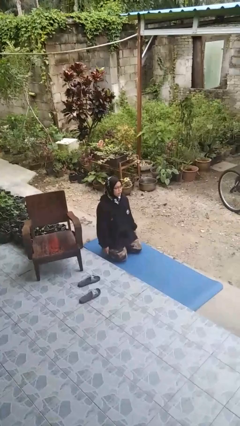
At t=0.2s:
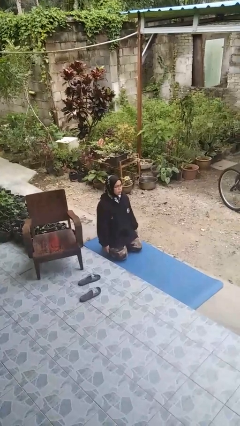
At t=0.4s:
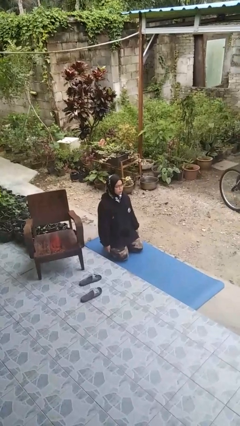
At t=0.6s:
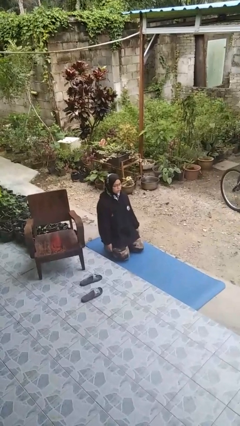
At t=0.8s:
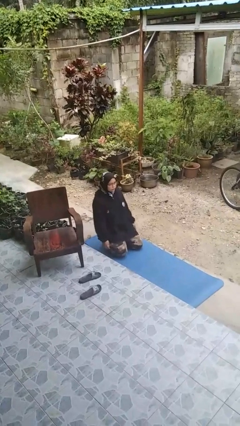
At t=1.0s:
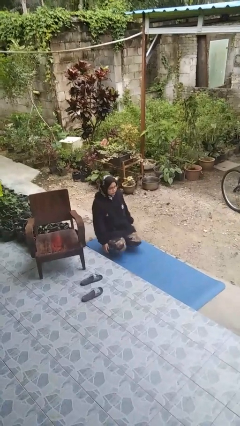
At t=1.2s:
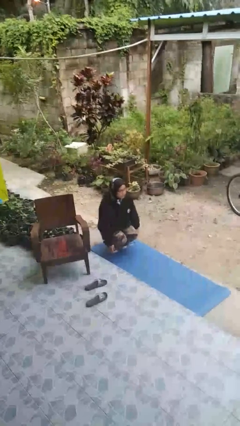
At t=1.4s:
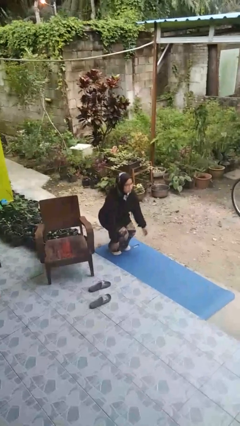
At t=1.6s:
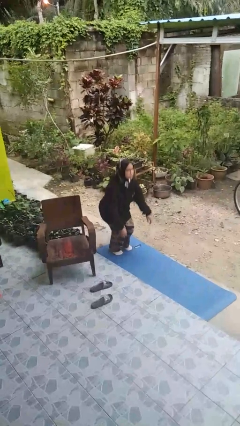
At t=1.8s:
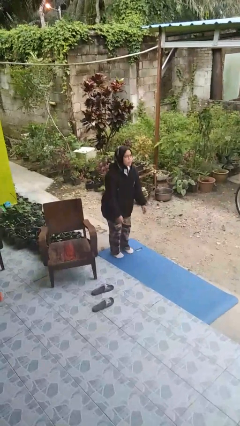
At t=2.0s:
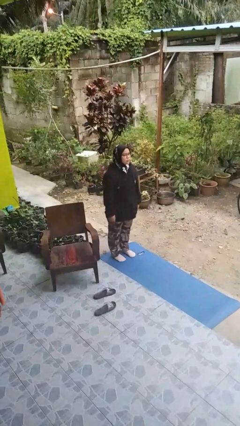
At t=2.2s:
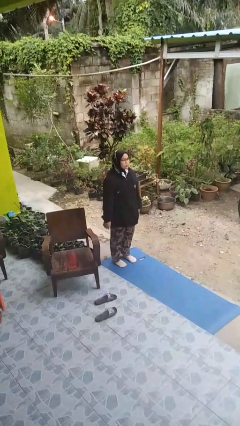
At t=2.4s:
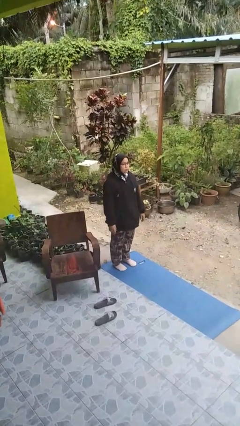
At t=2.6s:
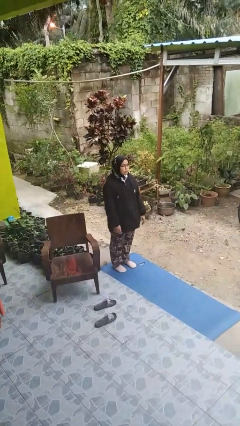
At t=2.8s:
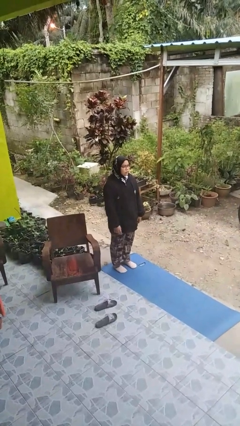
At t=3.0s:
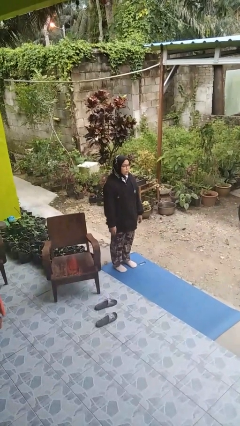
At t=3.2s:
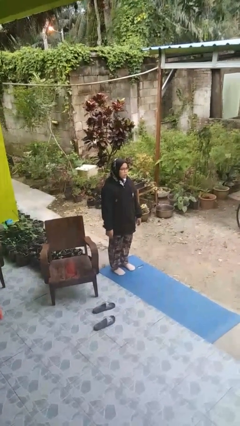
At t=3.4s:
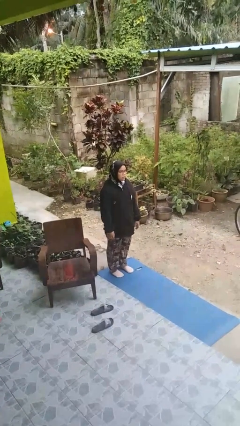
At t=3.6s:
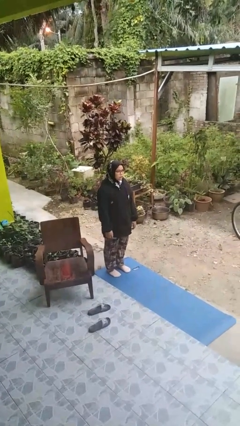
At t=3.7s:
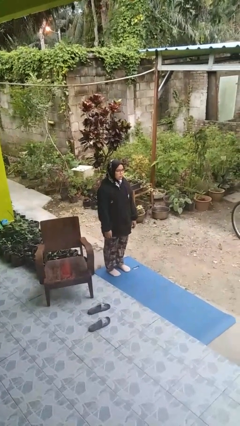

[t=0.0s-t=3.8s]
person stands up from floor

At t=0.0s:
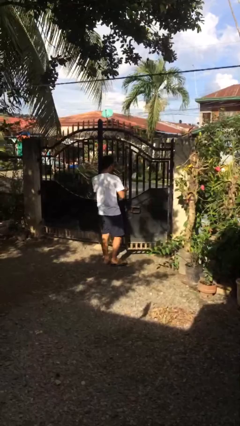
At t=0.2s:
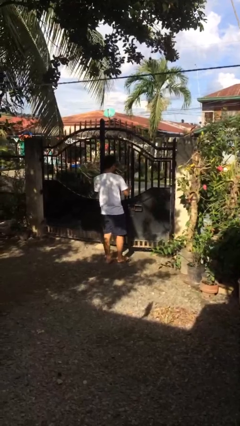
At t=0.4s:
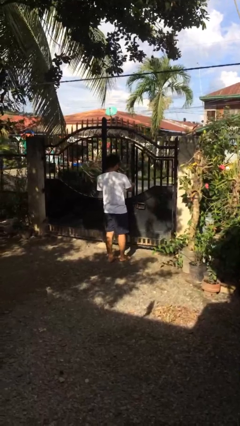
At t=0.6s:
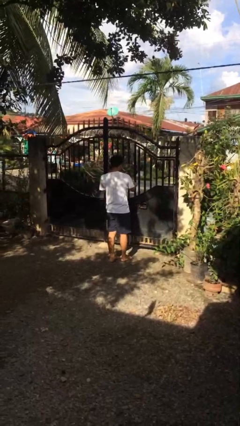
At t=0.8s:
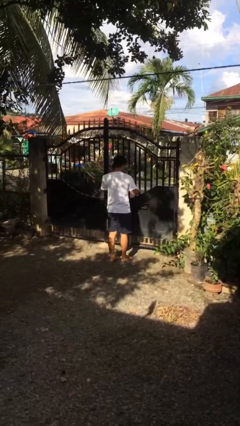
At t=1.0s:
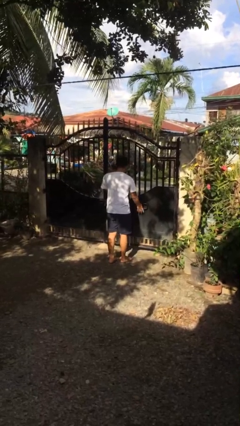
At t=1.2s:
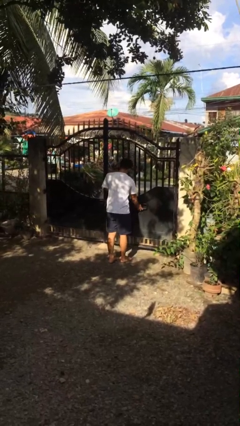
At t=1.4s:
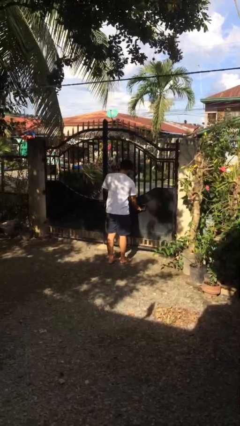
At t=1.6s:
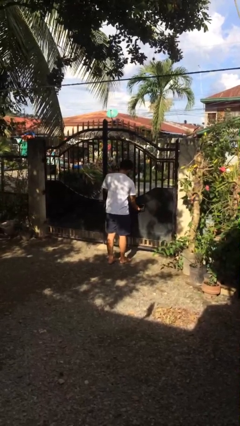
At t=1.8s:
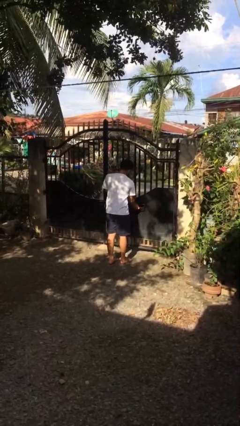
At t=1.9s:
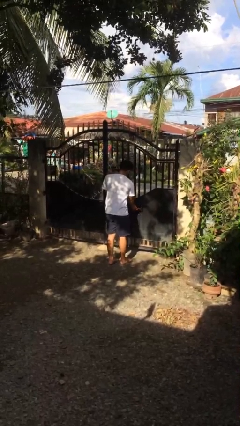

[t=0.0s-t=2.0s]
person closes facility door

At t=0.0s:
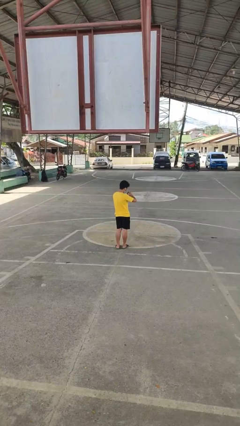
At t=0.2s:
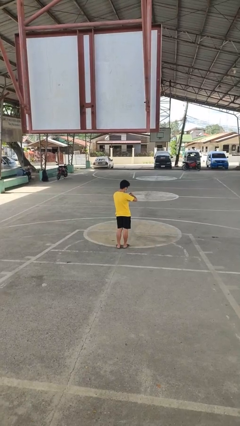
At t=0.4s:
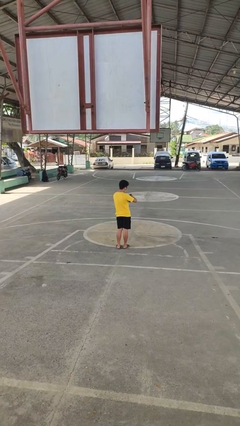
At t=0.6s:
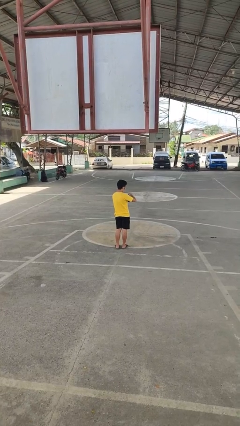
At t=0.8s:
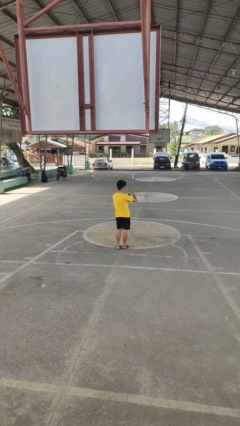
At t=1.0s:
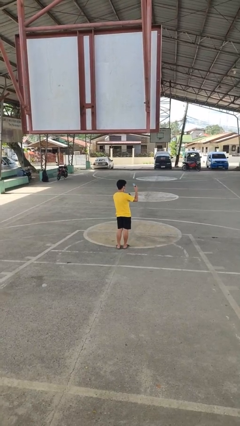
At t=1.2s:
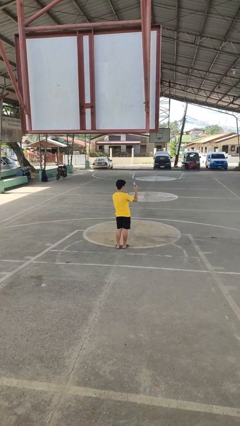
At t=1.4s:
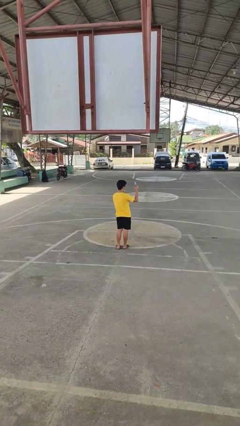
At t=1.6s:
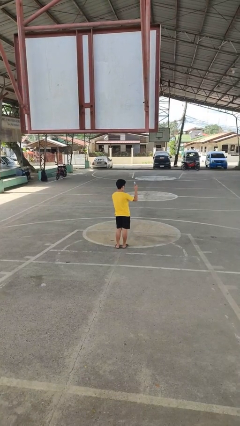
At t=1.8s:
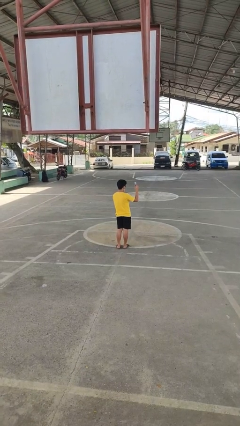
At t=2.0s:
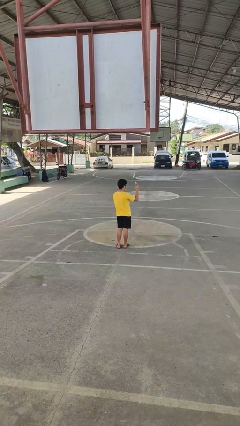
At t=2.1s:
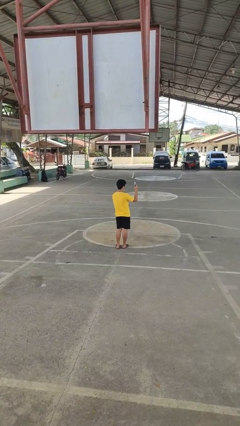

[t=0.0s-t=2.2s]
person takes object from purse

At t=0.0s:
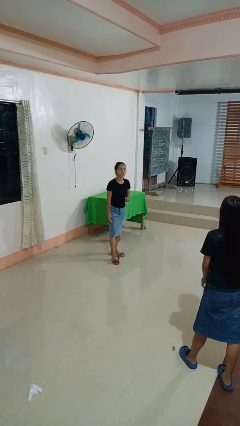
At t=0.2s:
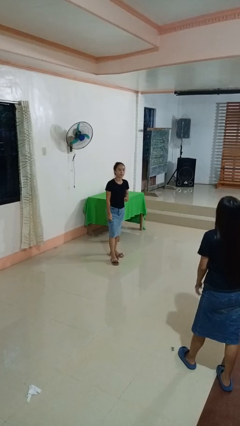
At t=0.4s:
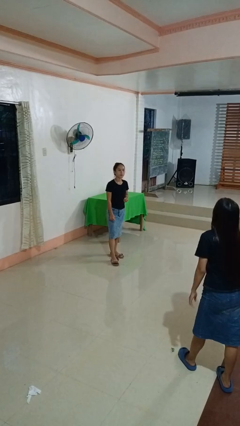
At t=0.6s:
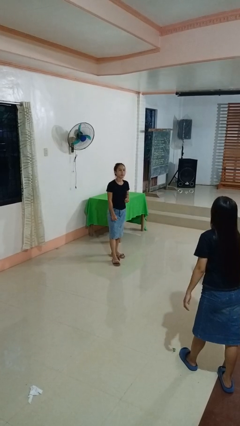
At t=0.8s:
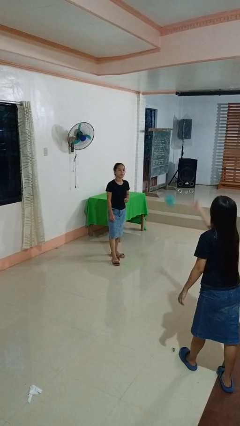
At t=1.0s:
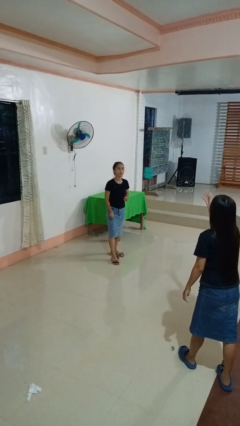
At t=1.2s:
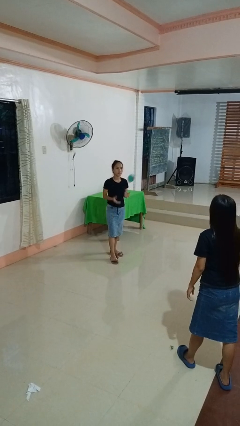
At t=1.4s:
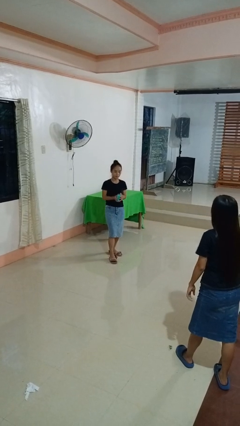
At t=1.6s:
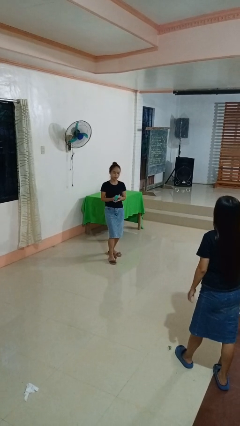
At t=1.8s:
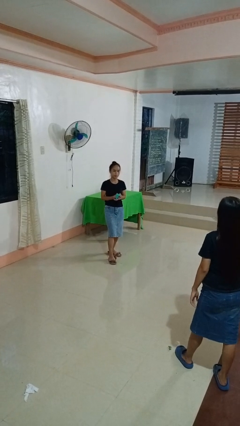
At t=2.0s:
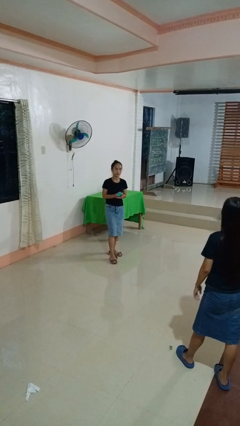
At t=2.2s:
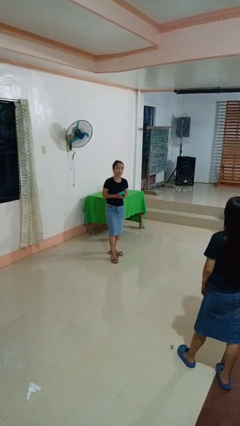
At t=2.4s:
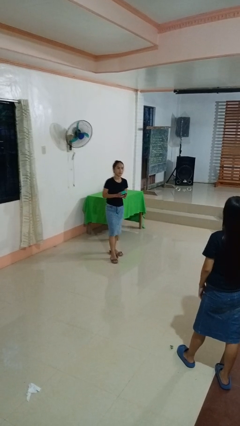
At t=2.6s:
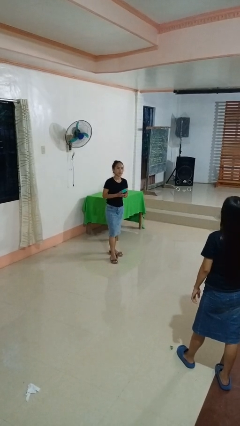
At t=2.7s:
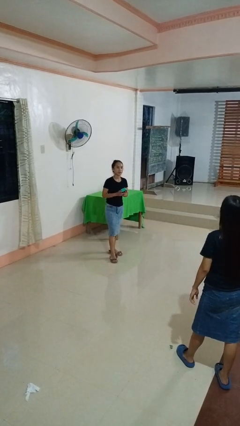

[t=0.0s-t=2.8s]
person catches object from person

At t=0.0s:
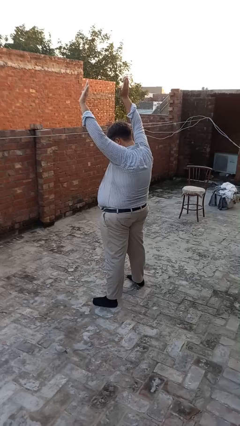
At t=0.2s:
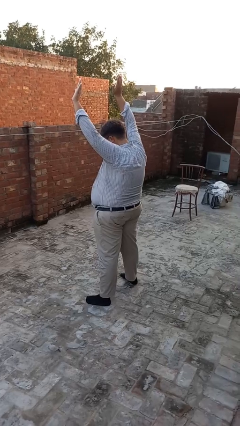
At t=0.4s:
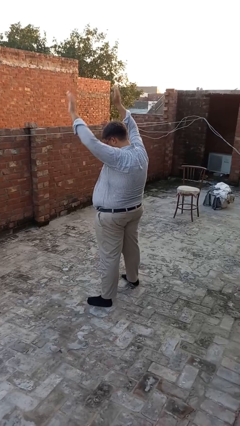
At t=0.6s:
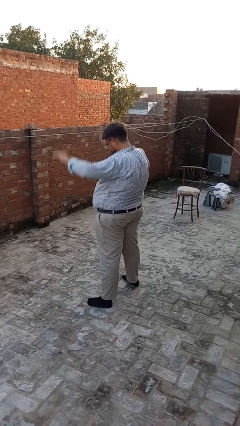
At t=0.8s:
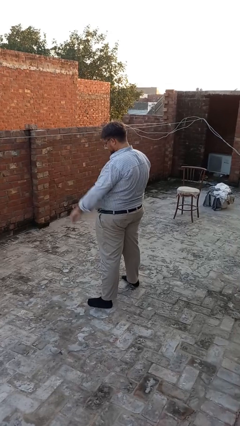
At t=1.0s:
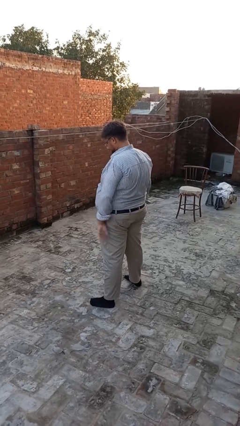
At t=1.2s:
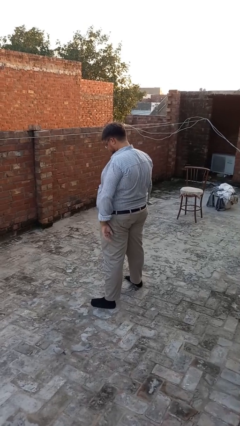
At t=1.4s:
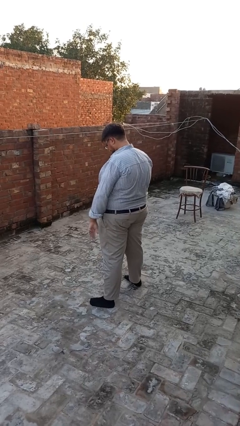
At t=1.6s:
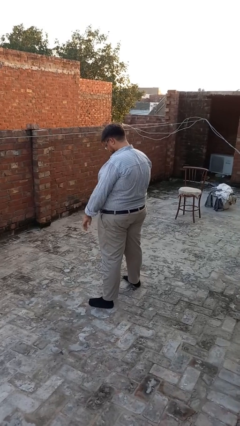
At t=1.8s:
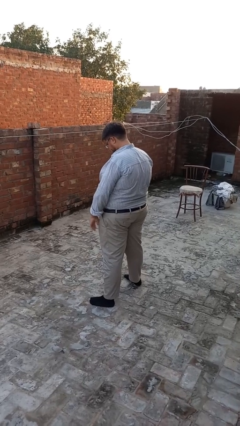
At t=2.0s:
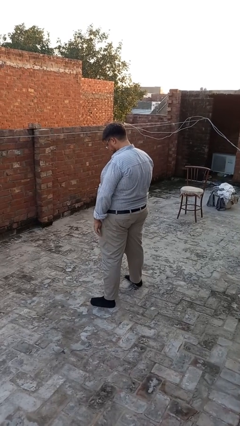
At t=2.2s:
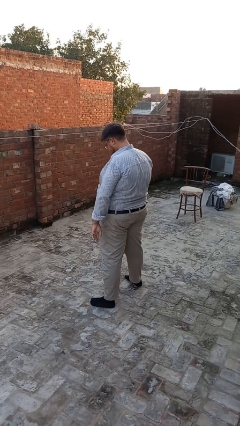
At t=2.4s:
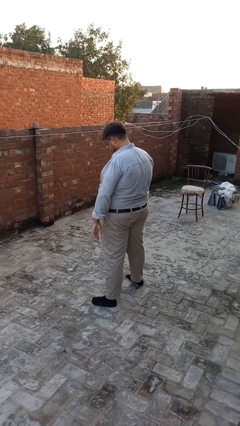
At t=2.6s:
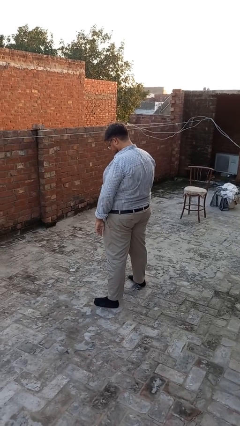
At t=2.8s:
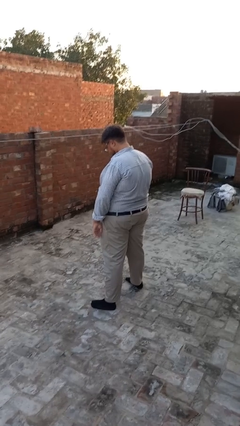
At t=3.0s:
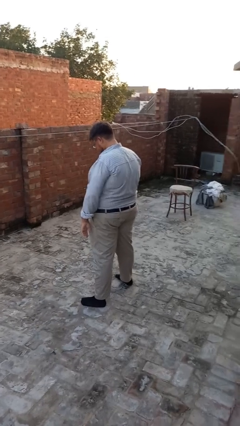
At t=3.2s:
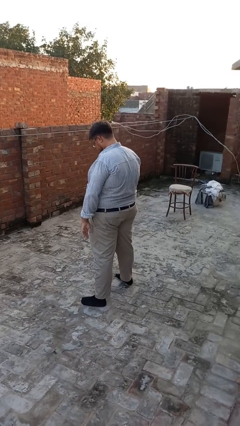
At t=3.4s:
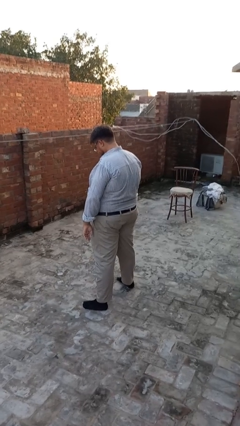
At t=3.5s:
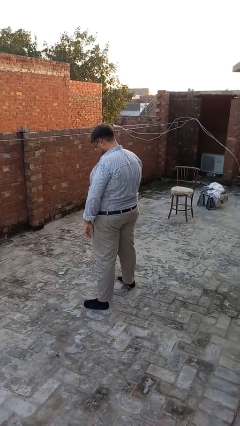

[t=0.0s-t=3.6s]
person gestures swipe down

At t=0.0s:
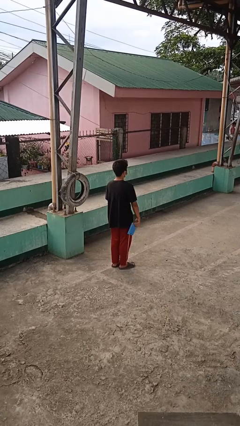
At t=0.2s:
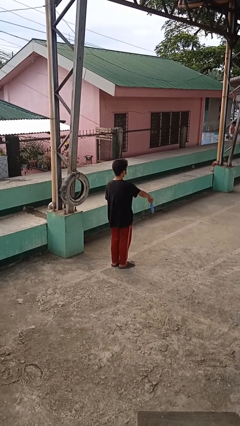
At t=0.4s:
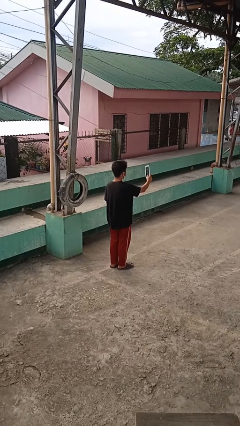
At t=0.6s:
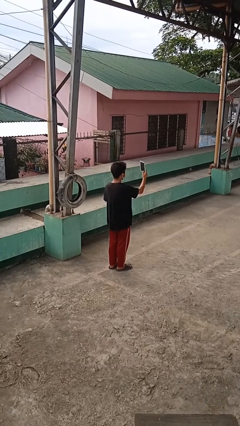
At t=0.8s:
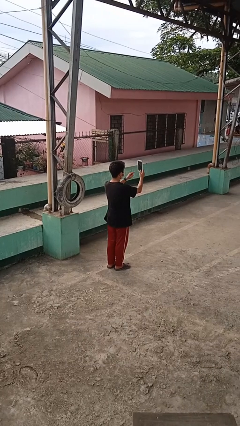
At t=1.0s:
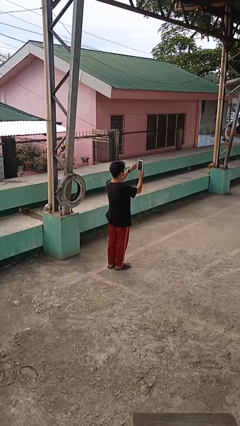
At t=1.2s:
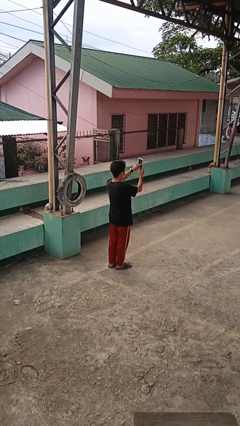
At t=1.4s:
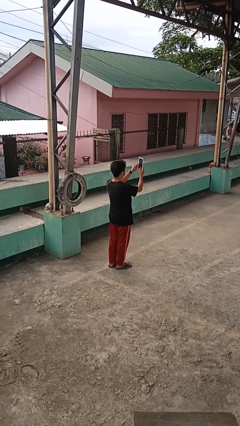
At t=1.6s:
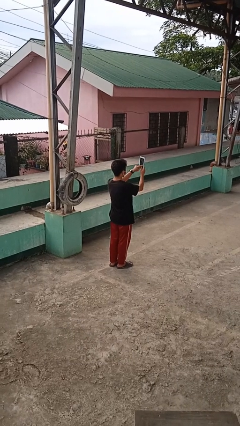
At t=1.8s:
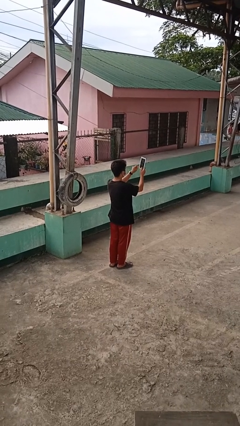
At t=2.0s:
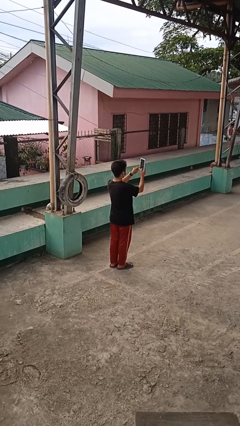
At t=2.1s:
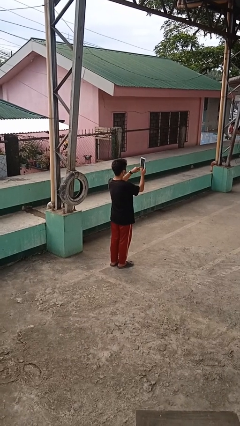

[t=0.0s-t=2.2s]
person interacts with tablet

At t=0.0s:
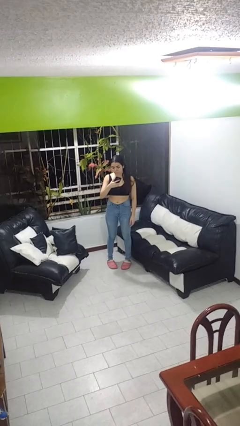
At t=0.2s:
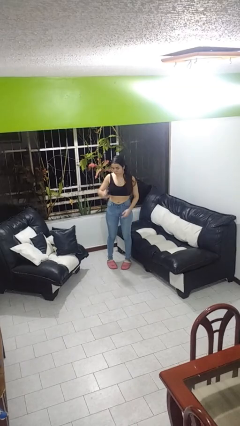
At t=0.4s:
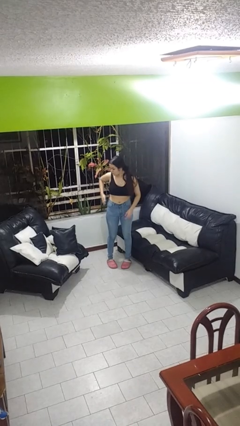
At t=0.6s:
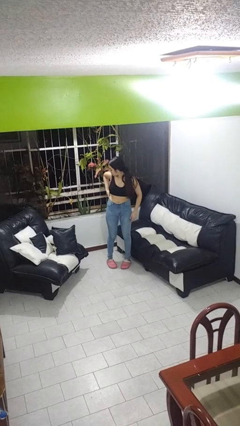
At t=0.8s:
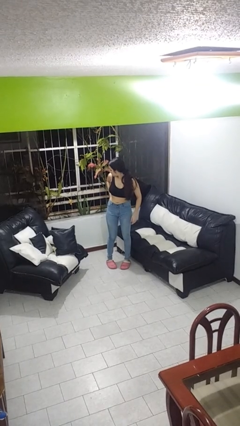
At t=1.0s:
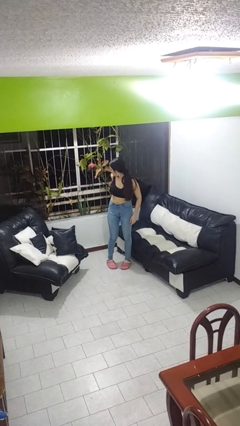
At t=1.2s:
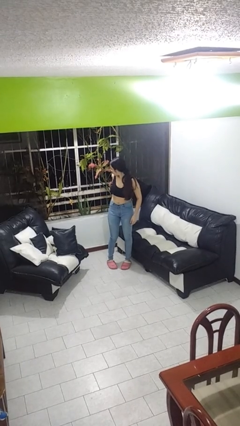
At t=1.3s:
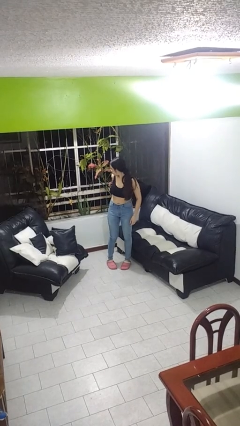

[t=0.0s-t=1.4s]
person puts phone into pocket
